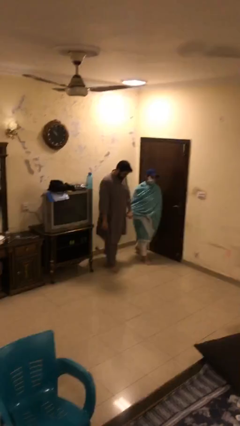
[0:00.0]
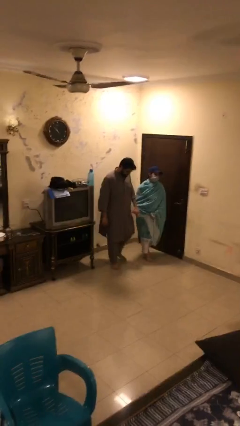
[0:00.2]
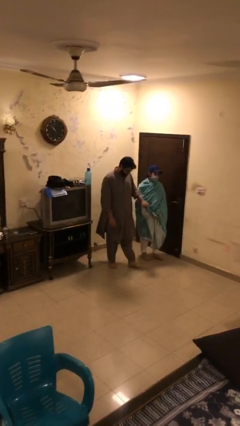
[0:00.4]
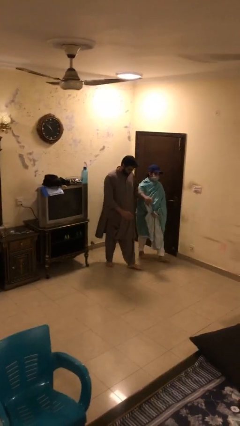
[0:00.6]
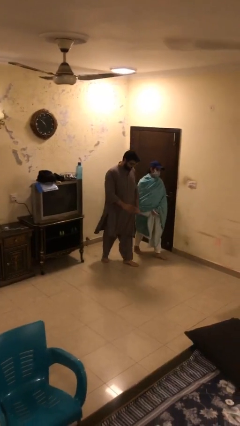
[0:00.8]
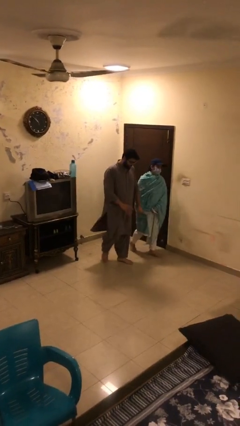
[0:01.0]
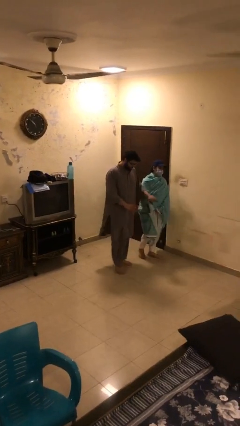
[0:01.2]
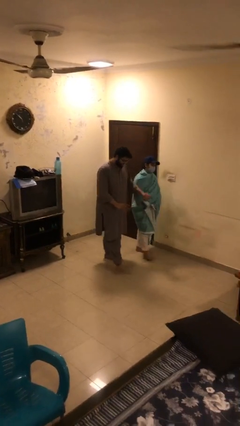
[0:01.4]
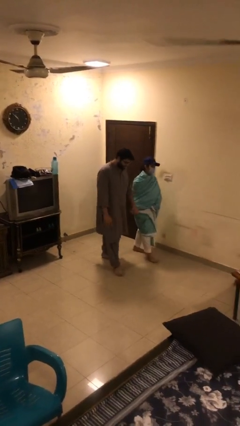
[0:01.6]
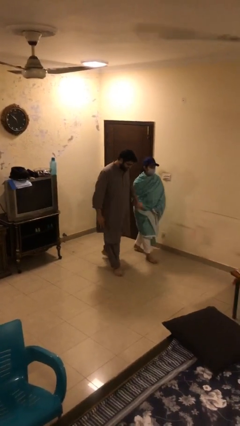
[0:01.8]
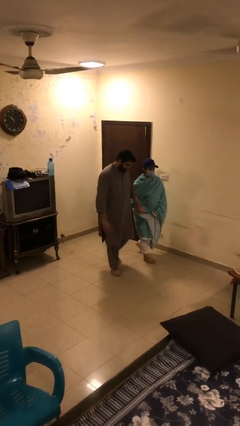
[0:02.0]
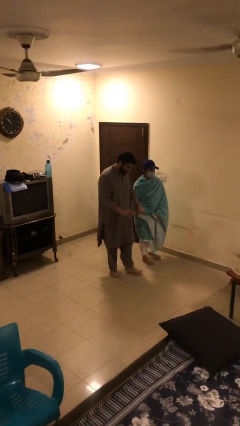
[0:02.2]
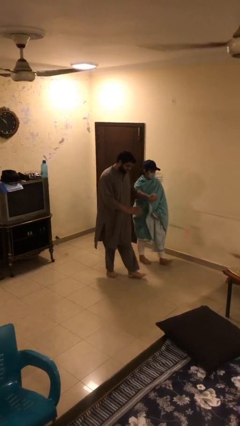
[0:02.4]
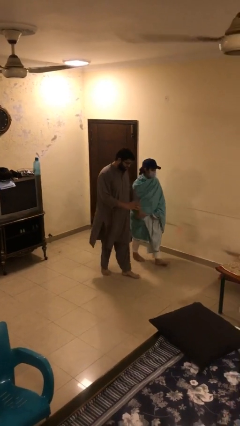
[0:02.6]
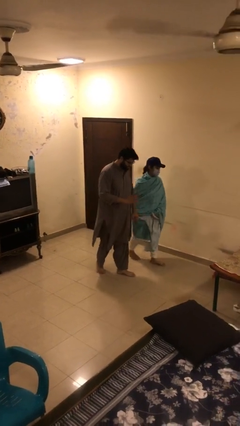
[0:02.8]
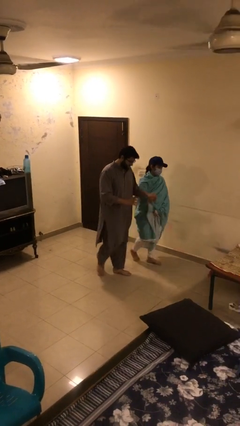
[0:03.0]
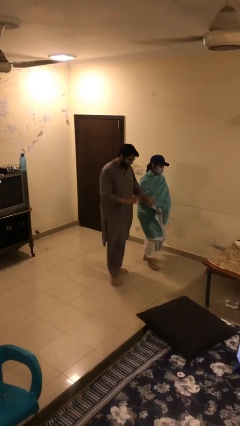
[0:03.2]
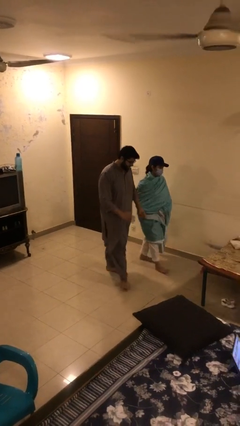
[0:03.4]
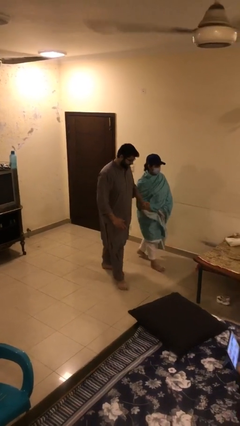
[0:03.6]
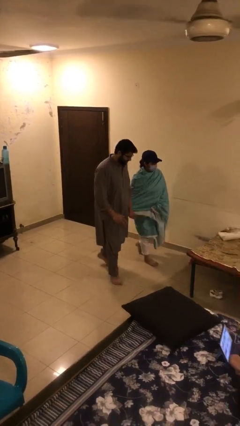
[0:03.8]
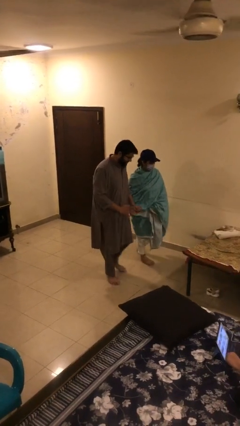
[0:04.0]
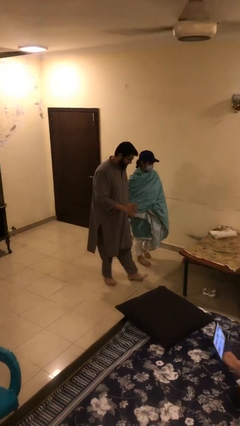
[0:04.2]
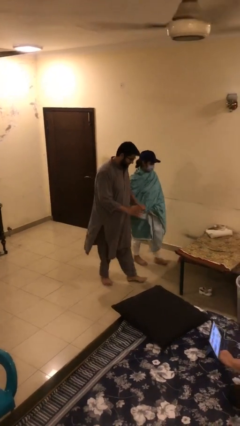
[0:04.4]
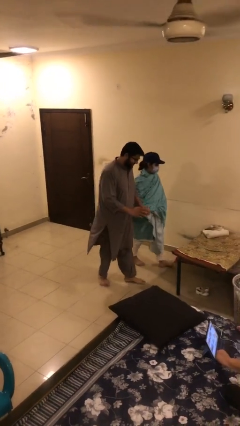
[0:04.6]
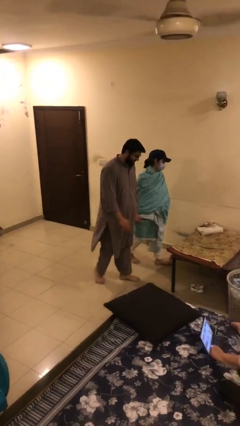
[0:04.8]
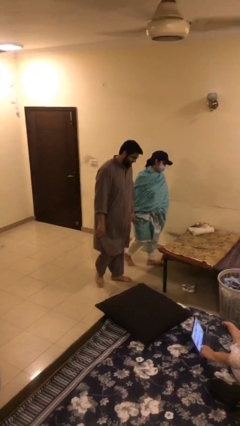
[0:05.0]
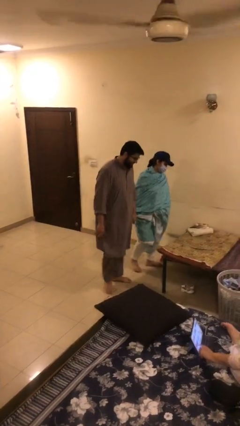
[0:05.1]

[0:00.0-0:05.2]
person holds hand

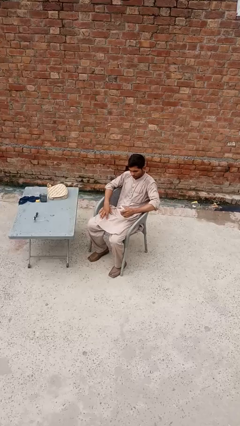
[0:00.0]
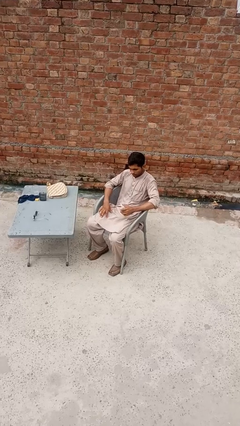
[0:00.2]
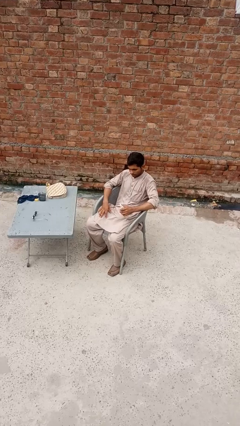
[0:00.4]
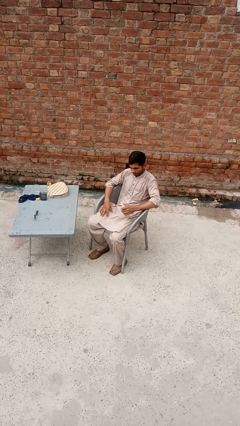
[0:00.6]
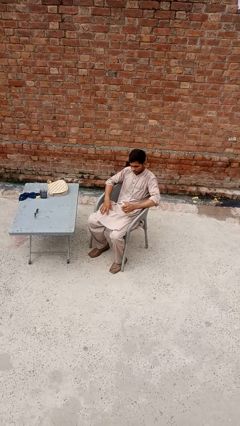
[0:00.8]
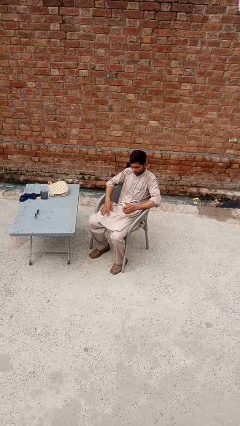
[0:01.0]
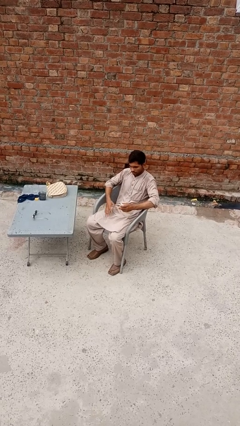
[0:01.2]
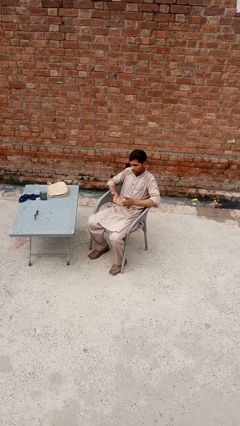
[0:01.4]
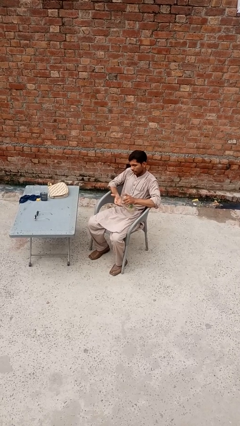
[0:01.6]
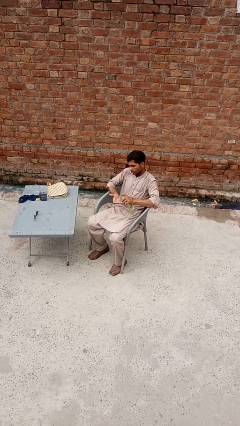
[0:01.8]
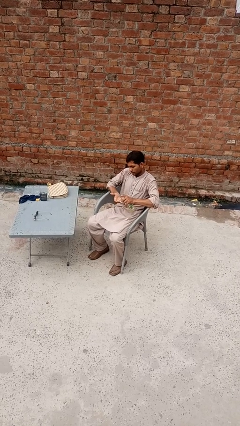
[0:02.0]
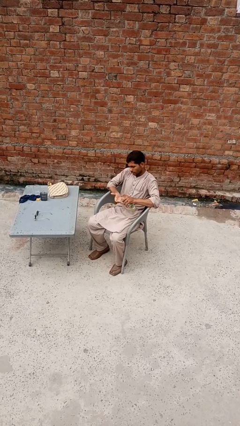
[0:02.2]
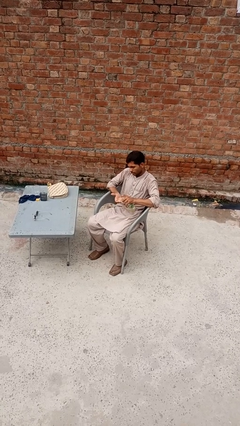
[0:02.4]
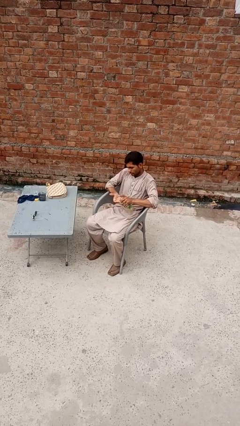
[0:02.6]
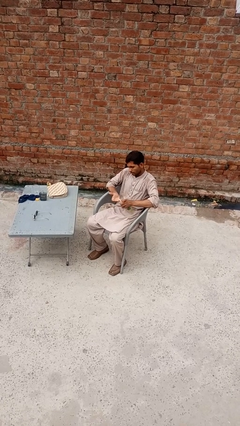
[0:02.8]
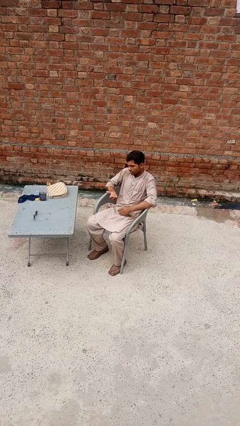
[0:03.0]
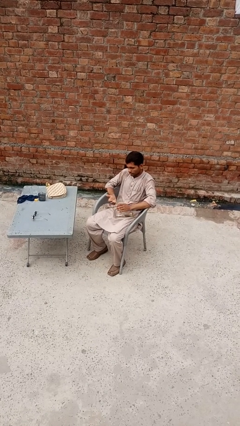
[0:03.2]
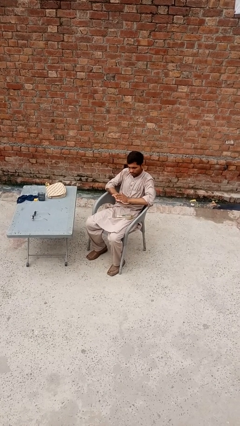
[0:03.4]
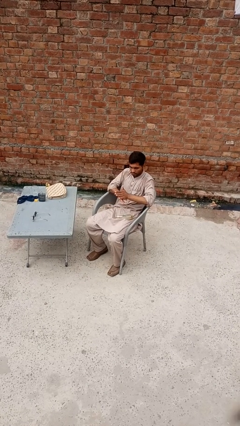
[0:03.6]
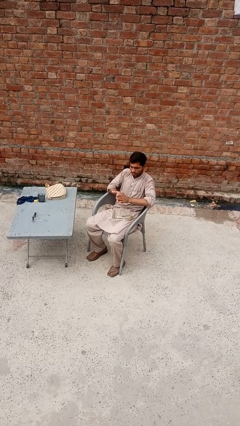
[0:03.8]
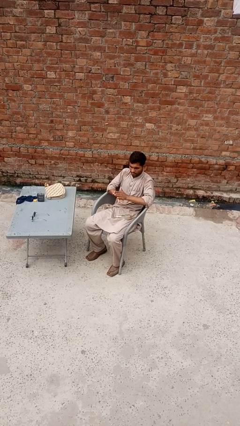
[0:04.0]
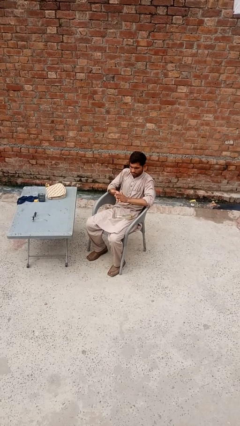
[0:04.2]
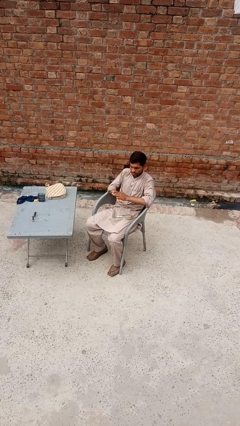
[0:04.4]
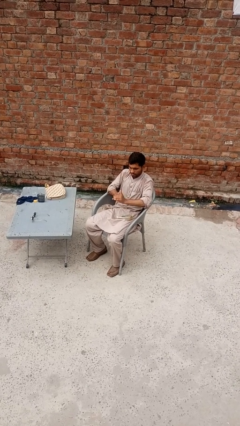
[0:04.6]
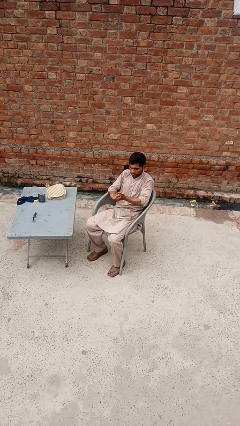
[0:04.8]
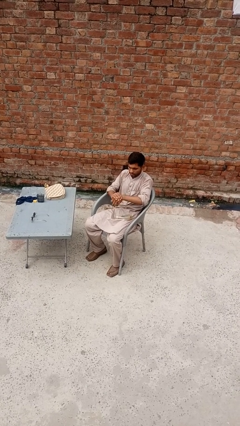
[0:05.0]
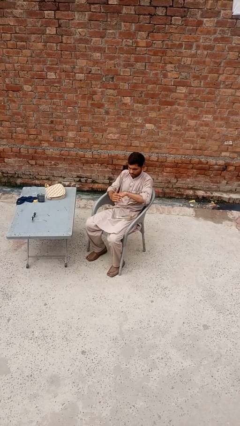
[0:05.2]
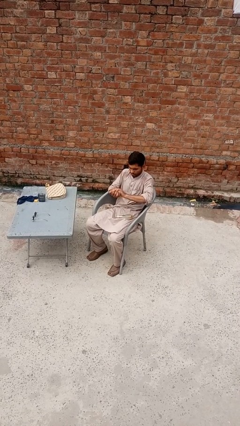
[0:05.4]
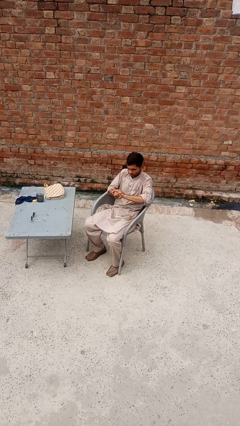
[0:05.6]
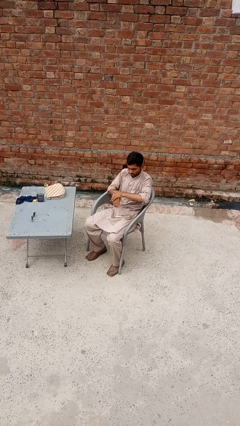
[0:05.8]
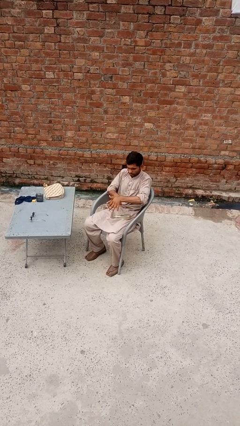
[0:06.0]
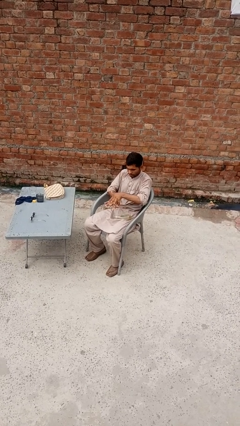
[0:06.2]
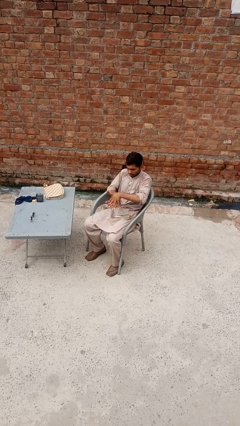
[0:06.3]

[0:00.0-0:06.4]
person applies sunscreen

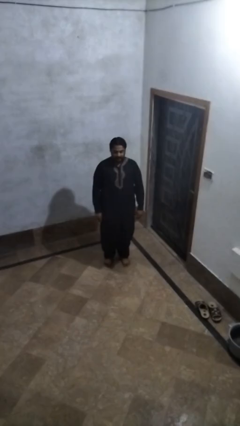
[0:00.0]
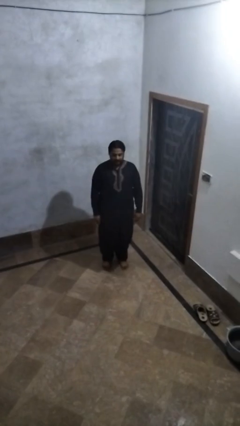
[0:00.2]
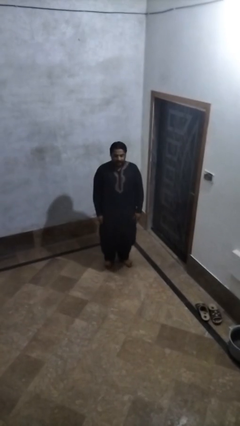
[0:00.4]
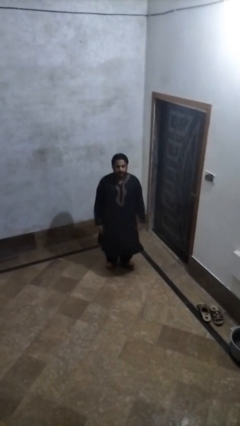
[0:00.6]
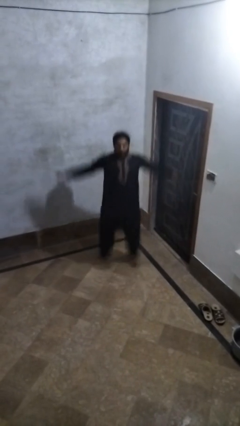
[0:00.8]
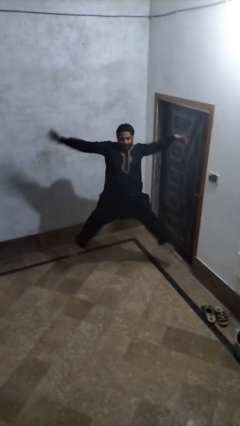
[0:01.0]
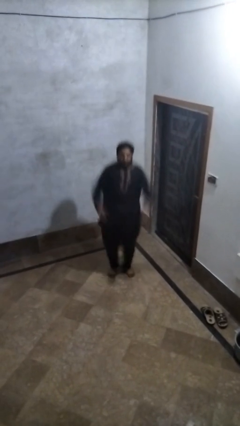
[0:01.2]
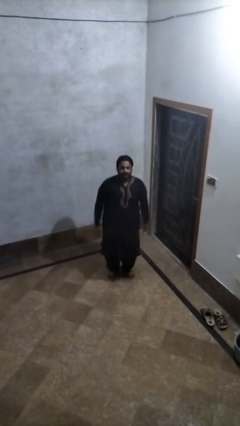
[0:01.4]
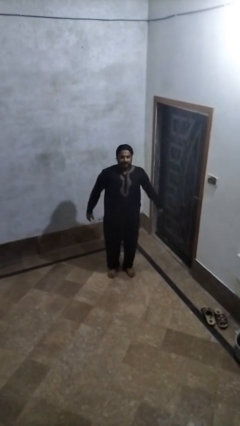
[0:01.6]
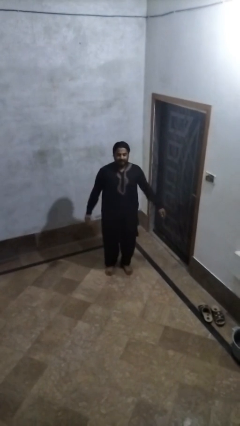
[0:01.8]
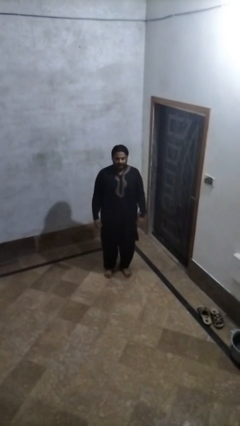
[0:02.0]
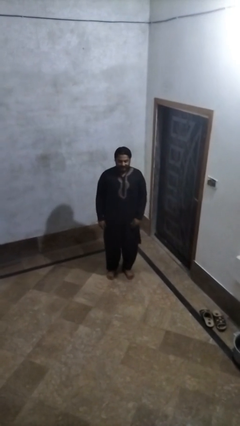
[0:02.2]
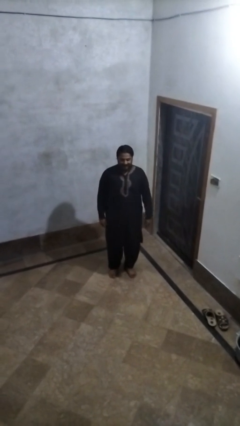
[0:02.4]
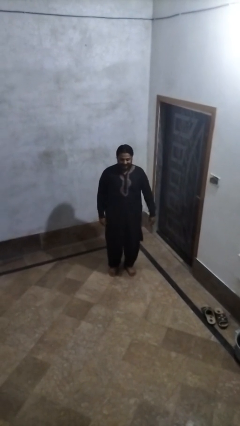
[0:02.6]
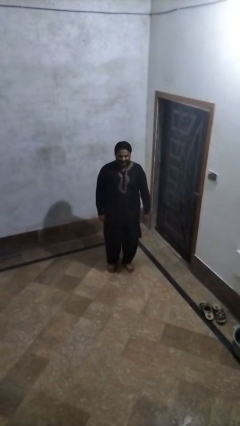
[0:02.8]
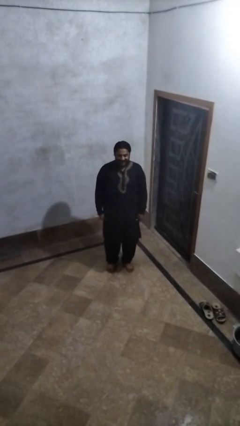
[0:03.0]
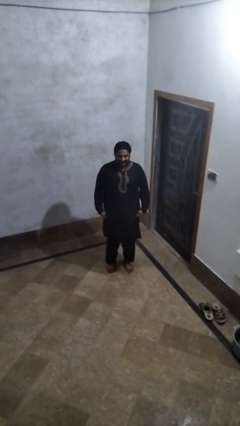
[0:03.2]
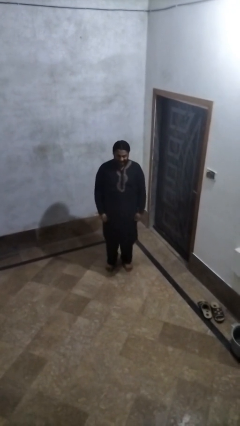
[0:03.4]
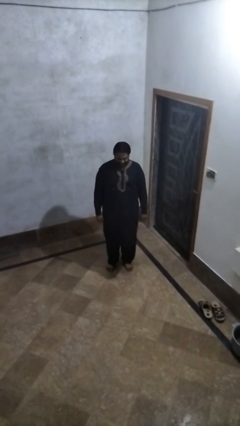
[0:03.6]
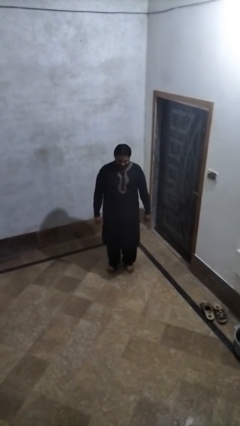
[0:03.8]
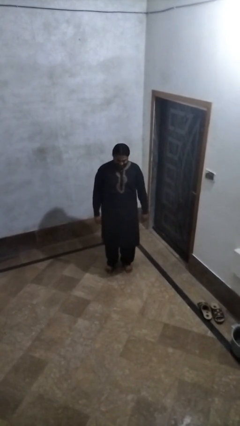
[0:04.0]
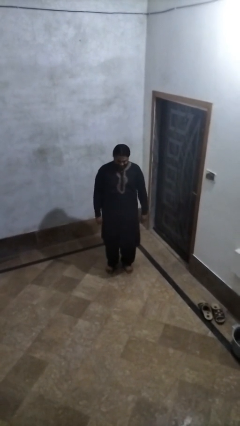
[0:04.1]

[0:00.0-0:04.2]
person exercises with jumping jacks

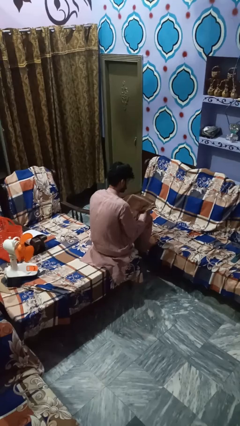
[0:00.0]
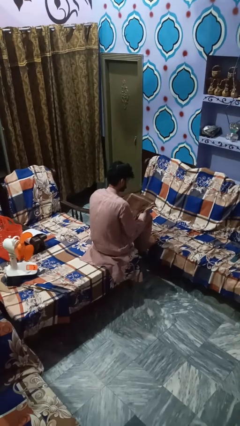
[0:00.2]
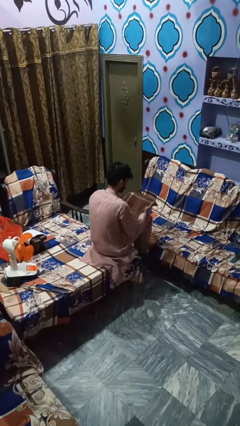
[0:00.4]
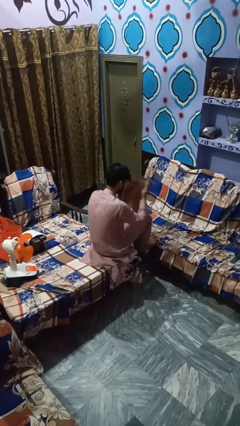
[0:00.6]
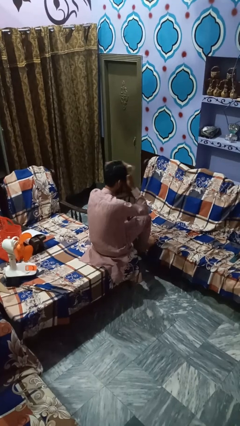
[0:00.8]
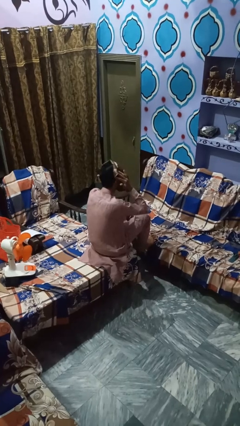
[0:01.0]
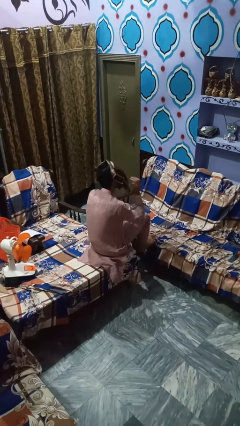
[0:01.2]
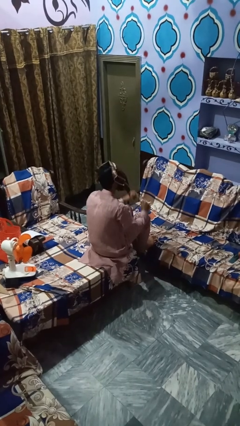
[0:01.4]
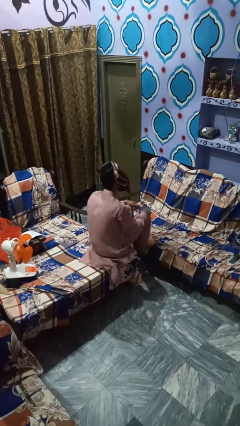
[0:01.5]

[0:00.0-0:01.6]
person yawns

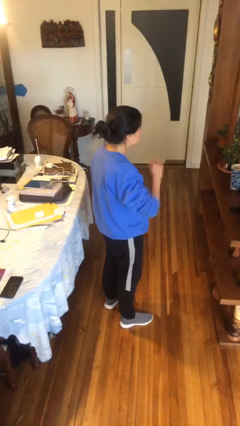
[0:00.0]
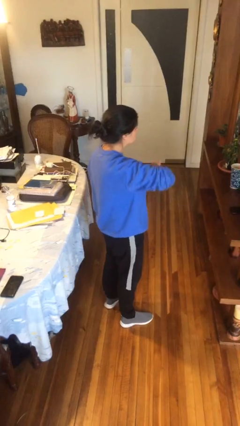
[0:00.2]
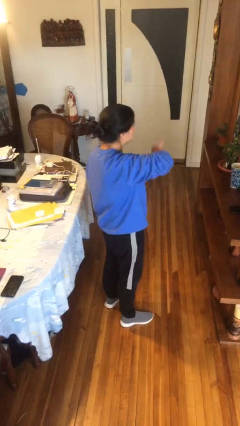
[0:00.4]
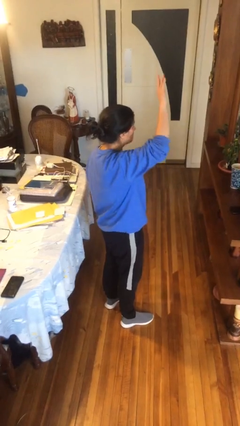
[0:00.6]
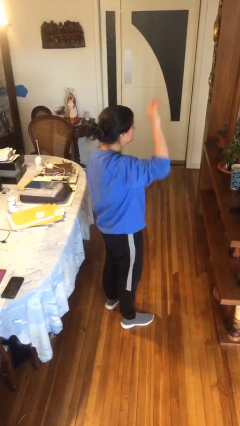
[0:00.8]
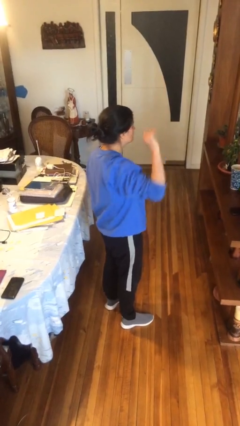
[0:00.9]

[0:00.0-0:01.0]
person gestures swipe up
